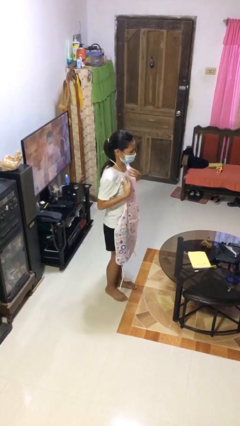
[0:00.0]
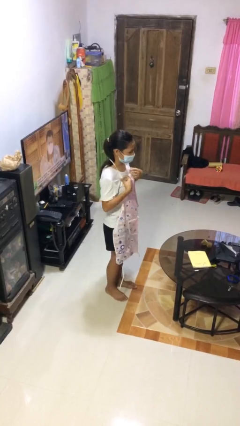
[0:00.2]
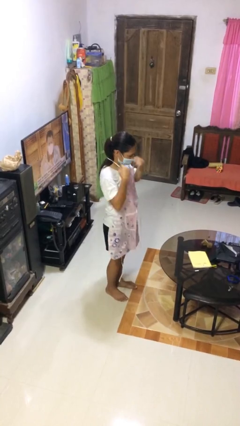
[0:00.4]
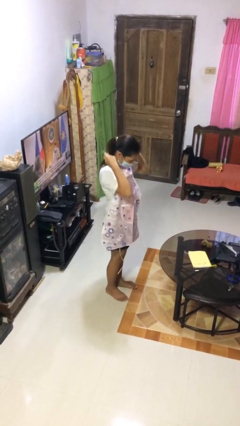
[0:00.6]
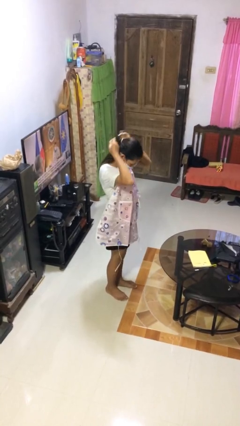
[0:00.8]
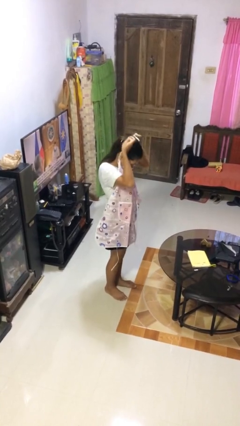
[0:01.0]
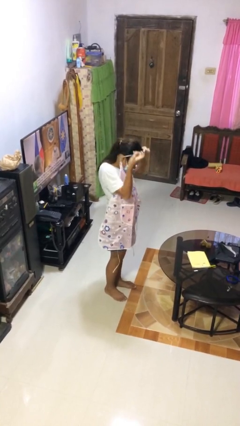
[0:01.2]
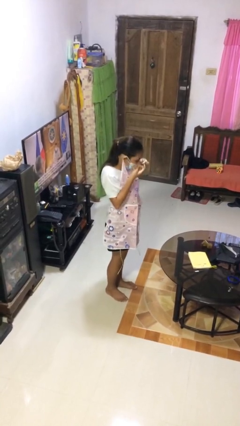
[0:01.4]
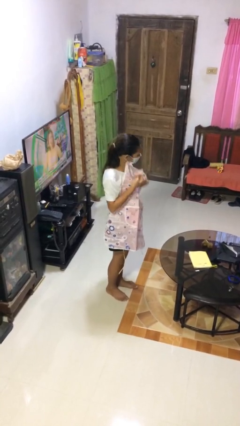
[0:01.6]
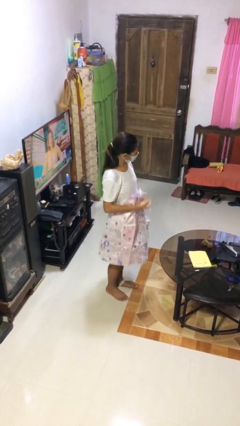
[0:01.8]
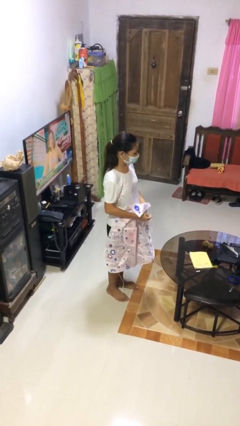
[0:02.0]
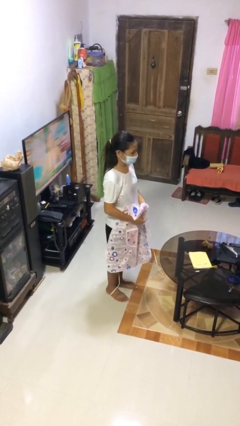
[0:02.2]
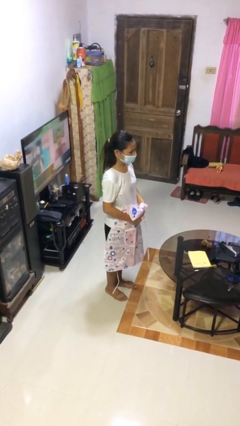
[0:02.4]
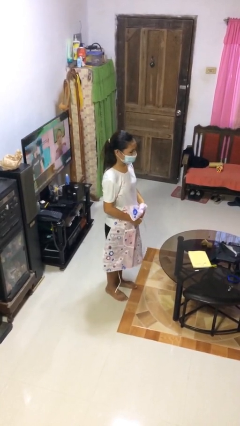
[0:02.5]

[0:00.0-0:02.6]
person takes off apron

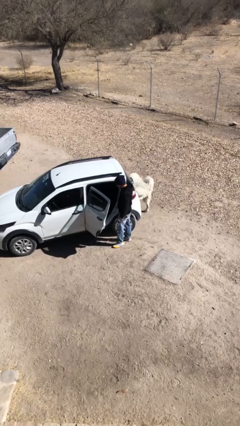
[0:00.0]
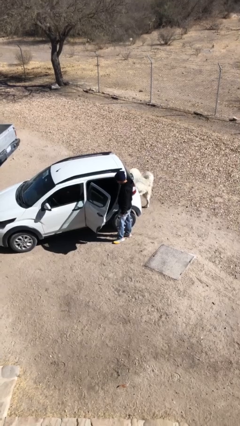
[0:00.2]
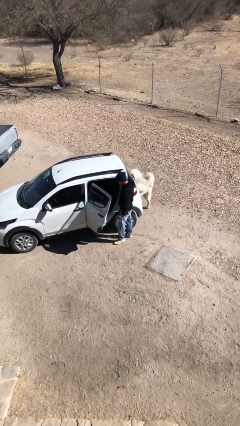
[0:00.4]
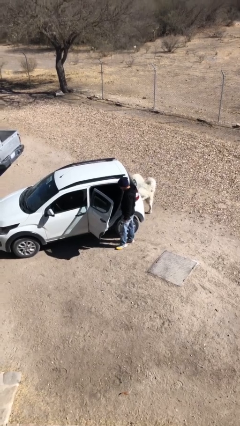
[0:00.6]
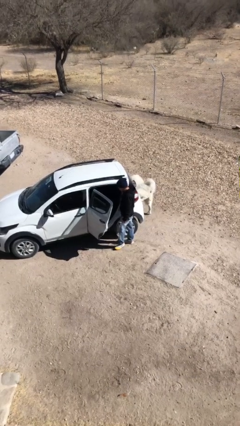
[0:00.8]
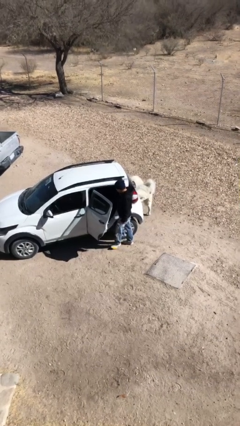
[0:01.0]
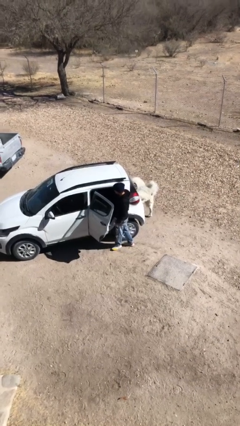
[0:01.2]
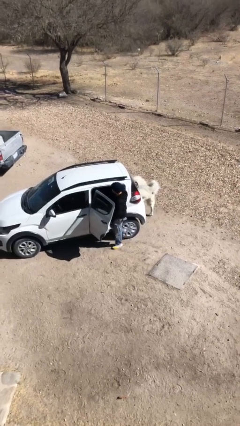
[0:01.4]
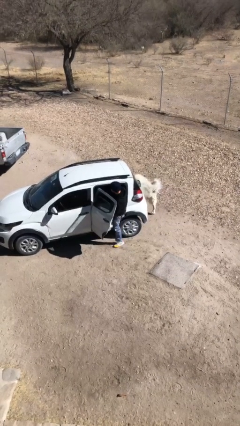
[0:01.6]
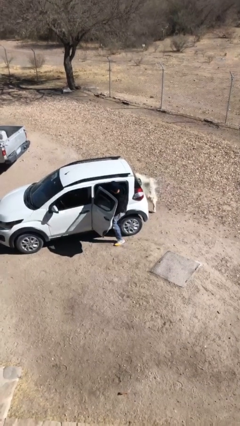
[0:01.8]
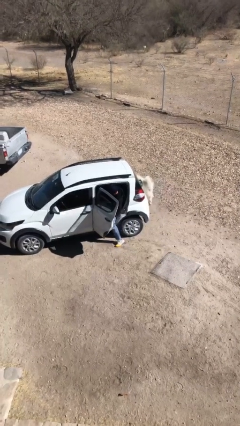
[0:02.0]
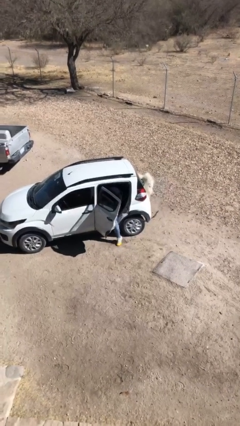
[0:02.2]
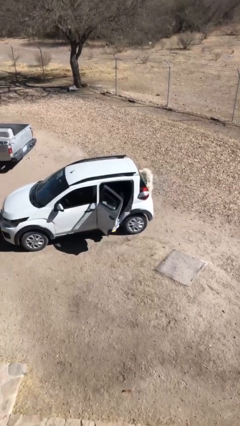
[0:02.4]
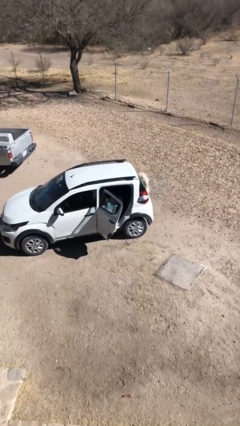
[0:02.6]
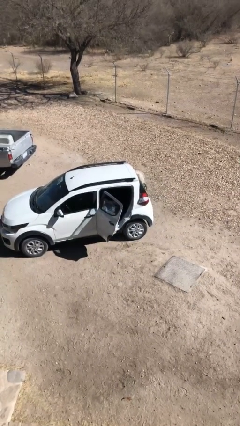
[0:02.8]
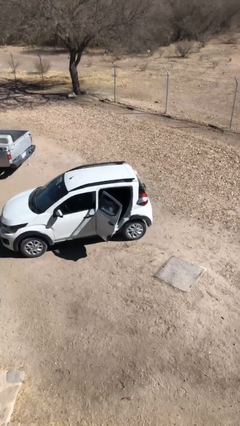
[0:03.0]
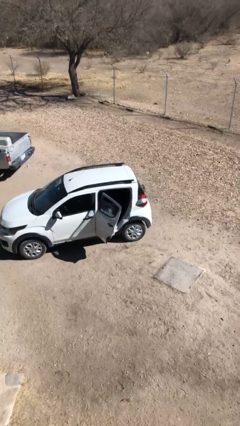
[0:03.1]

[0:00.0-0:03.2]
person enters car

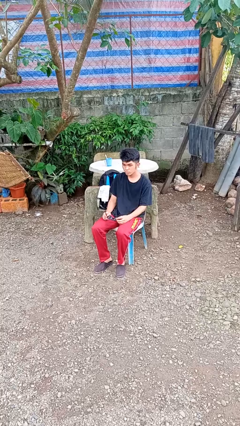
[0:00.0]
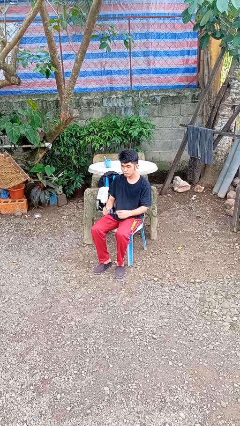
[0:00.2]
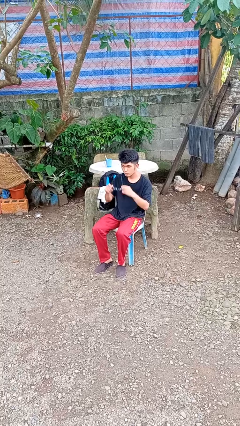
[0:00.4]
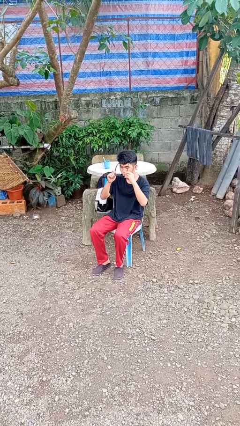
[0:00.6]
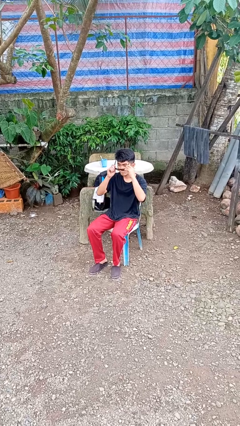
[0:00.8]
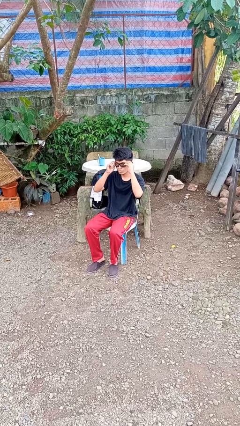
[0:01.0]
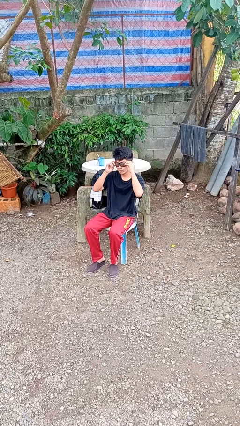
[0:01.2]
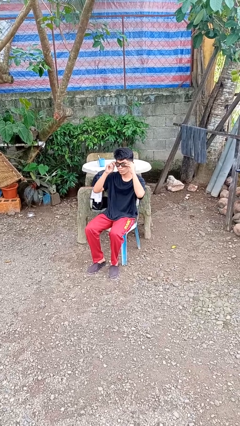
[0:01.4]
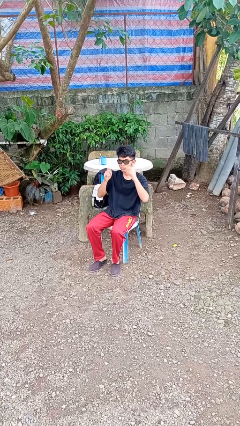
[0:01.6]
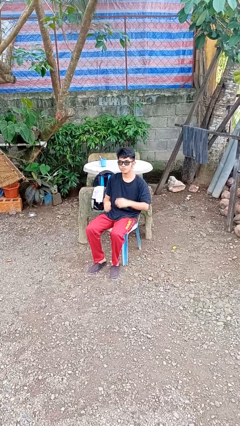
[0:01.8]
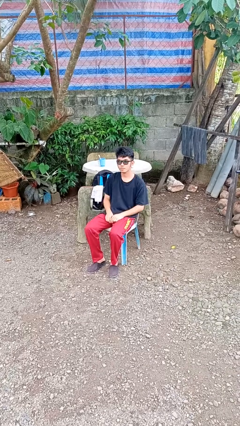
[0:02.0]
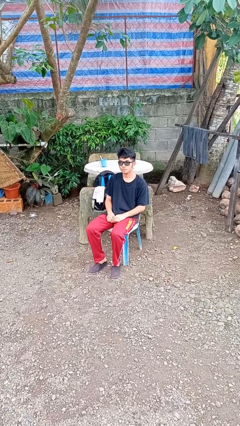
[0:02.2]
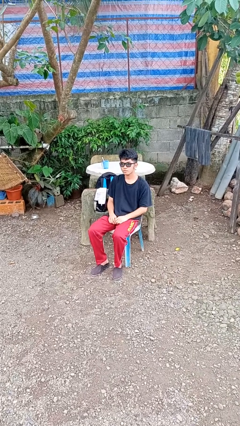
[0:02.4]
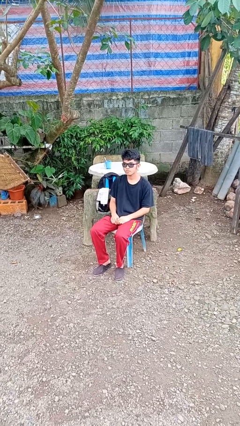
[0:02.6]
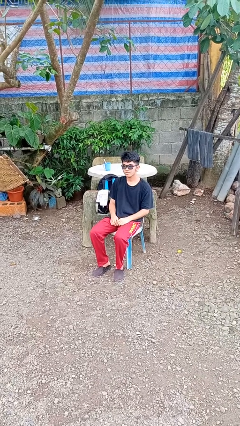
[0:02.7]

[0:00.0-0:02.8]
person puts on sunglasses

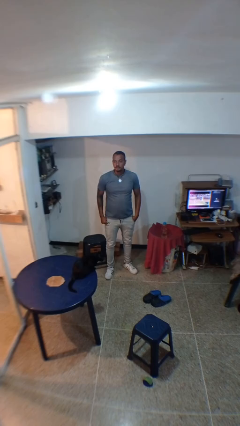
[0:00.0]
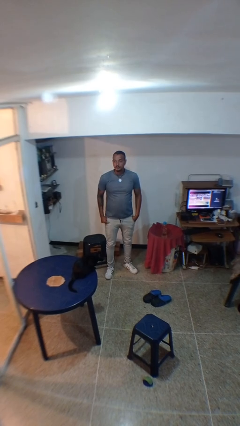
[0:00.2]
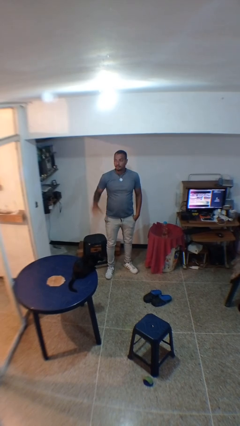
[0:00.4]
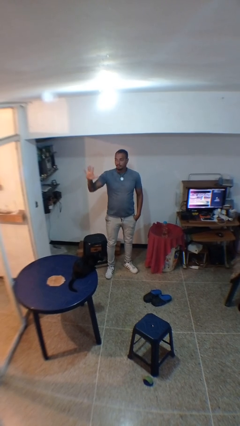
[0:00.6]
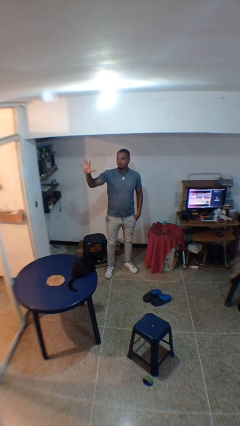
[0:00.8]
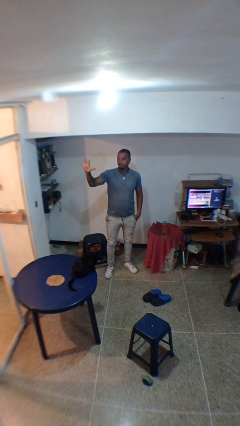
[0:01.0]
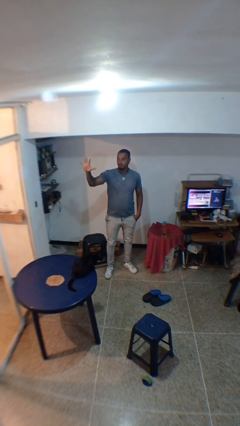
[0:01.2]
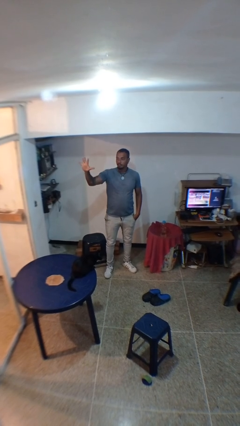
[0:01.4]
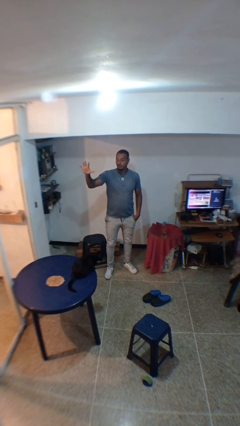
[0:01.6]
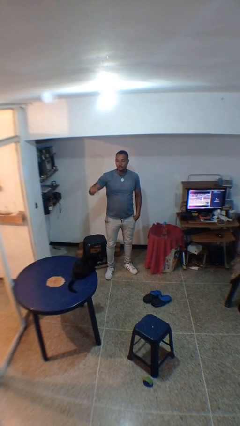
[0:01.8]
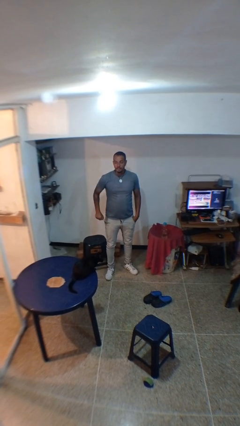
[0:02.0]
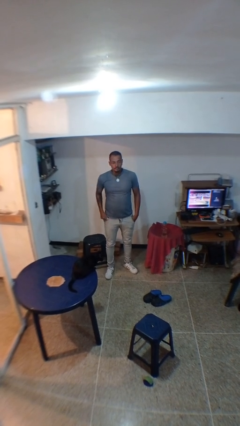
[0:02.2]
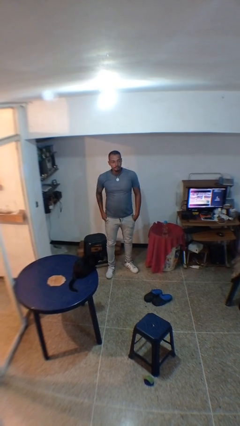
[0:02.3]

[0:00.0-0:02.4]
person gestures number five

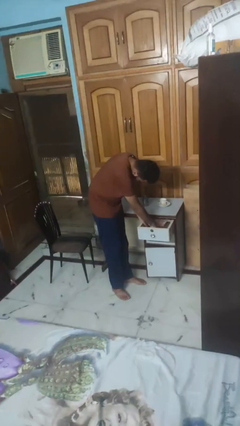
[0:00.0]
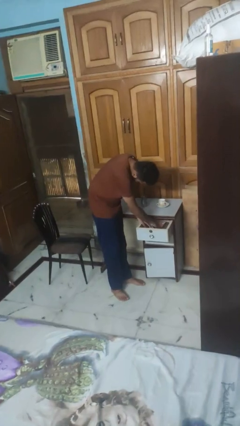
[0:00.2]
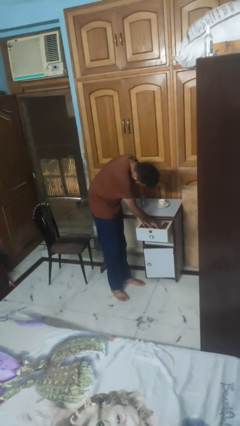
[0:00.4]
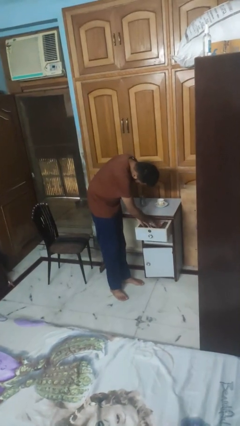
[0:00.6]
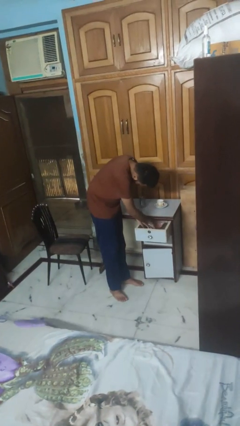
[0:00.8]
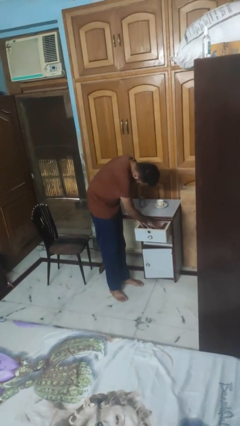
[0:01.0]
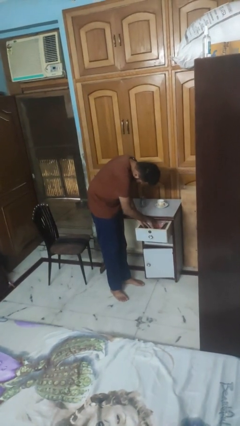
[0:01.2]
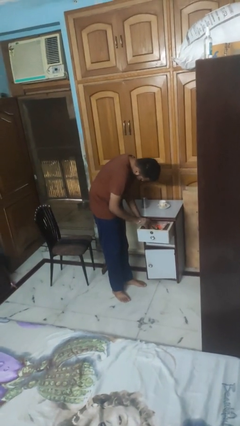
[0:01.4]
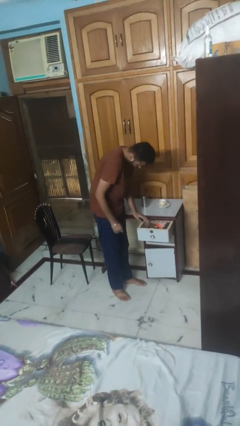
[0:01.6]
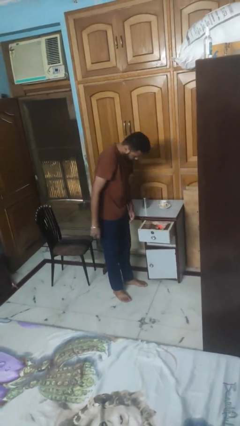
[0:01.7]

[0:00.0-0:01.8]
person searches in kitchen drawer

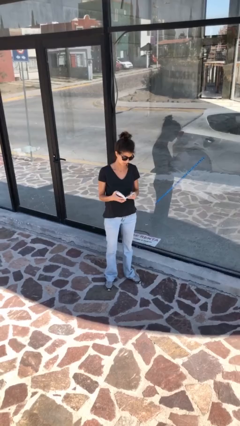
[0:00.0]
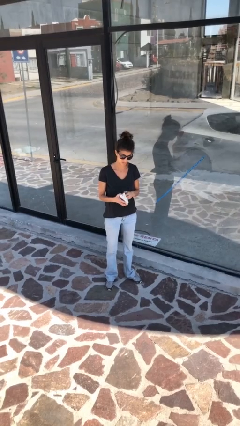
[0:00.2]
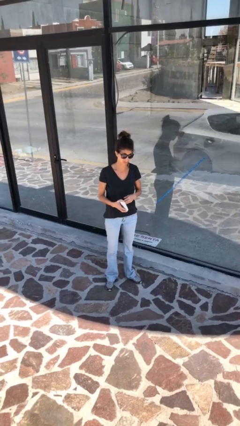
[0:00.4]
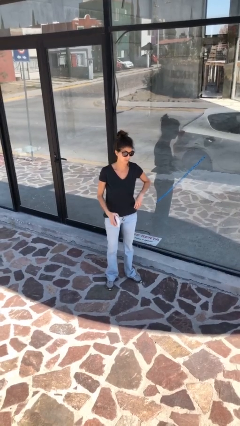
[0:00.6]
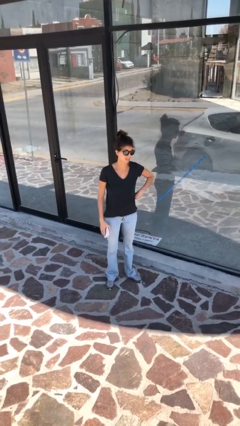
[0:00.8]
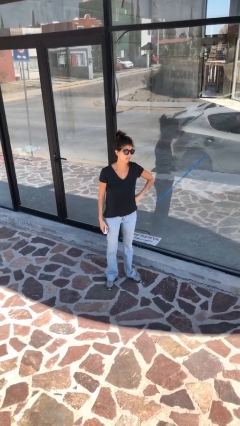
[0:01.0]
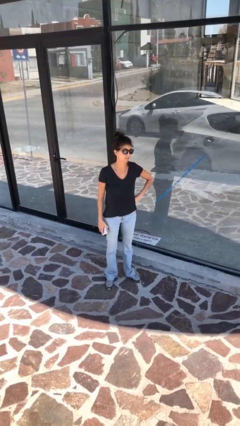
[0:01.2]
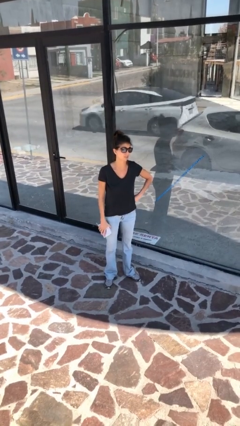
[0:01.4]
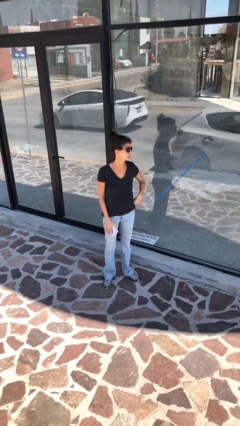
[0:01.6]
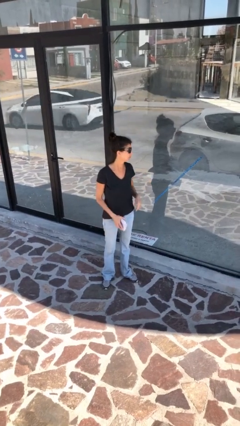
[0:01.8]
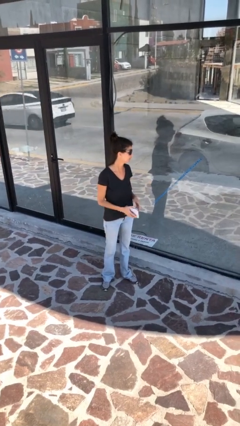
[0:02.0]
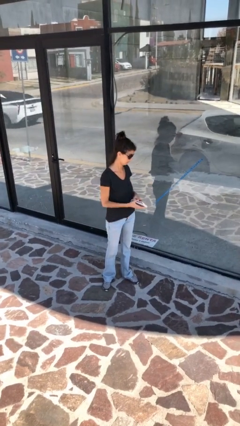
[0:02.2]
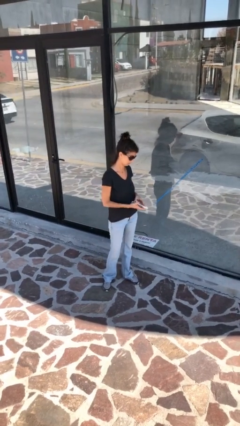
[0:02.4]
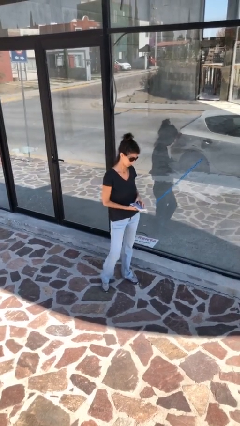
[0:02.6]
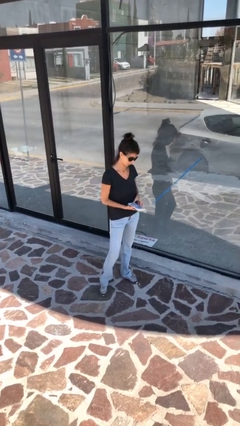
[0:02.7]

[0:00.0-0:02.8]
person reads document

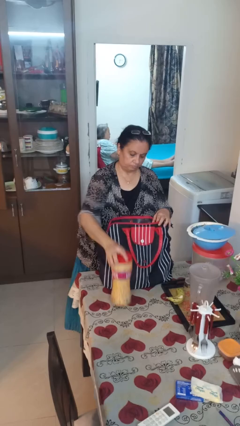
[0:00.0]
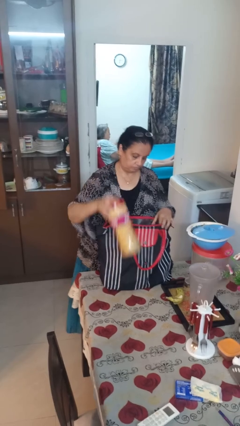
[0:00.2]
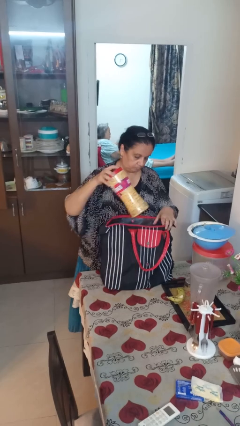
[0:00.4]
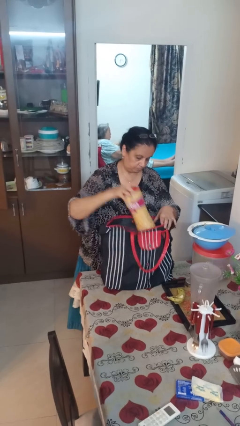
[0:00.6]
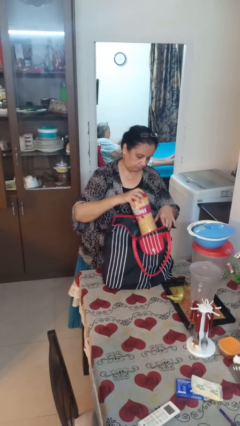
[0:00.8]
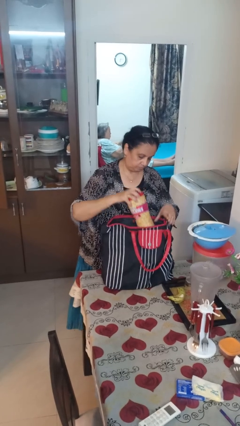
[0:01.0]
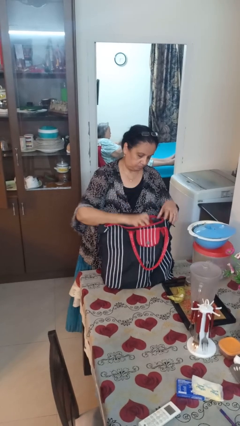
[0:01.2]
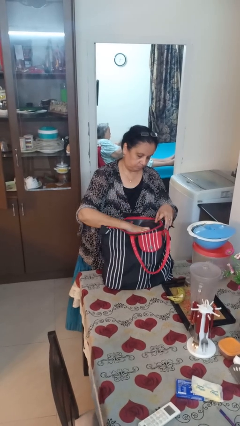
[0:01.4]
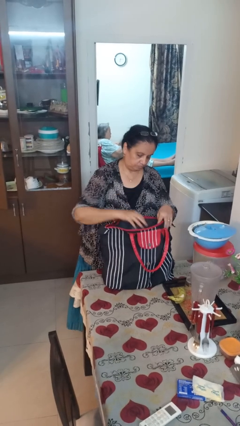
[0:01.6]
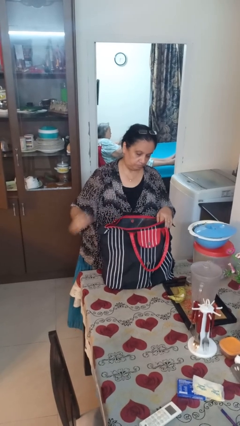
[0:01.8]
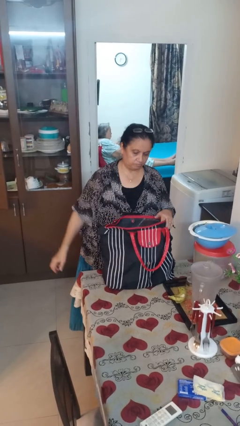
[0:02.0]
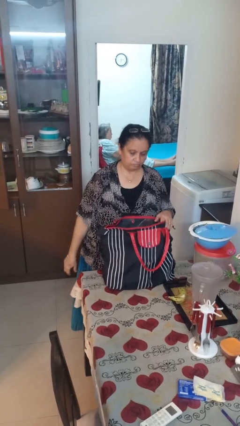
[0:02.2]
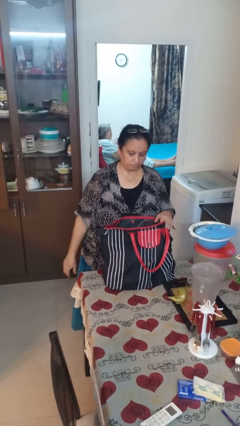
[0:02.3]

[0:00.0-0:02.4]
person puts object into bag
